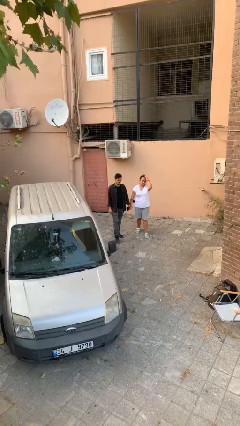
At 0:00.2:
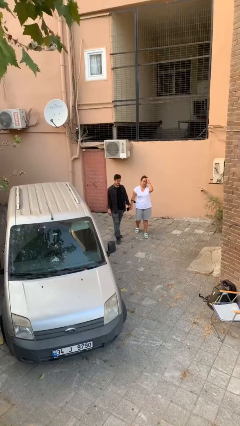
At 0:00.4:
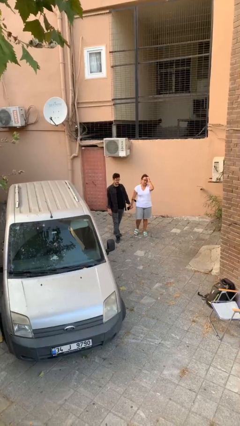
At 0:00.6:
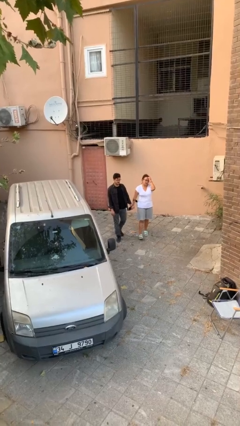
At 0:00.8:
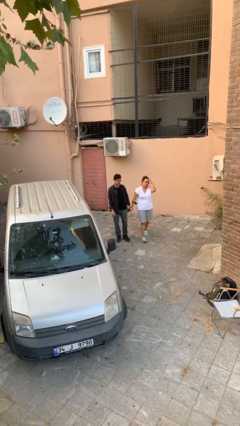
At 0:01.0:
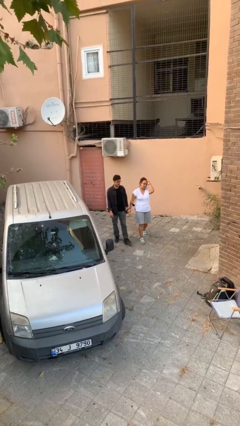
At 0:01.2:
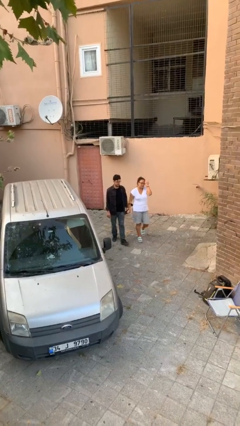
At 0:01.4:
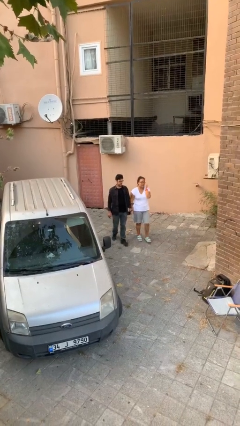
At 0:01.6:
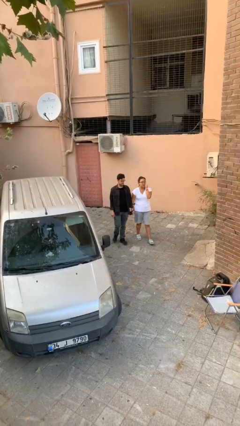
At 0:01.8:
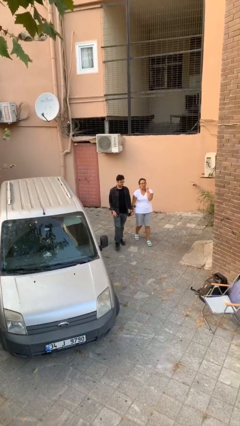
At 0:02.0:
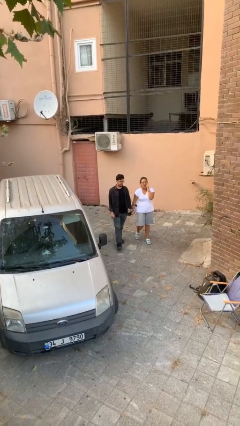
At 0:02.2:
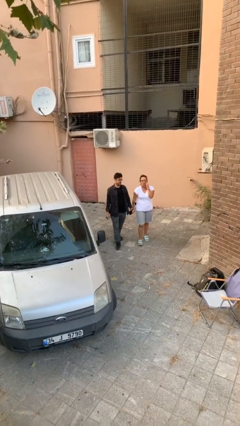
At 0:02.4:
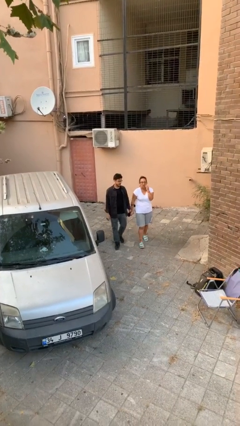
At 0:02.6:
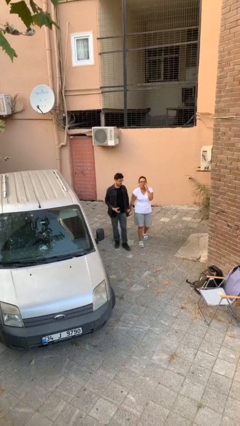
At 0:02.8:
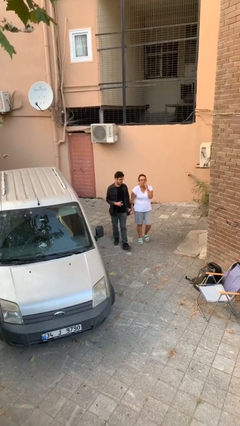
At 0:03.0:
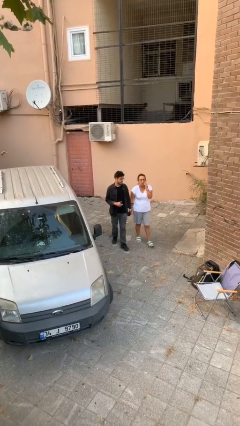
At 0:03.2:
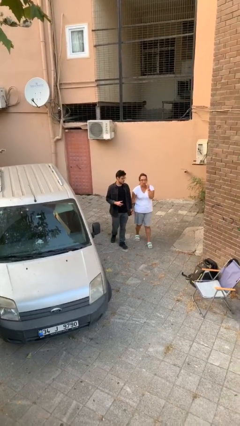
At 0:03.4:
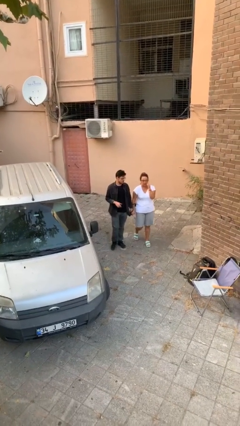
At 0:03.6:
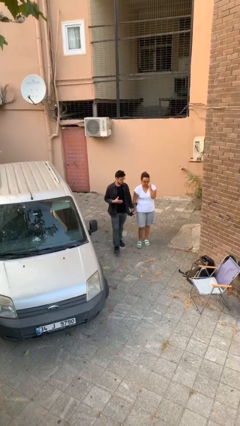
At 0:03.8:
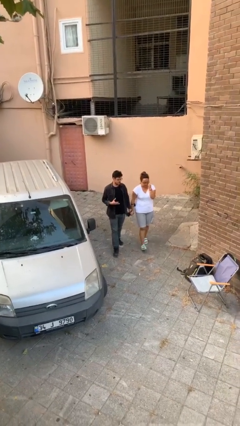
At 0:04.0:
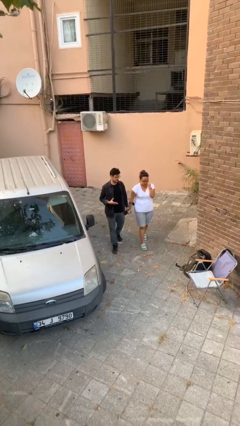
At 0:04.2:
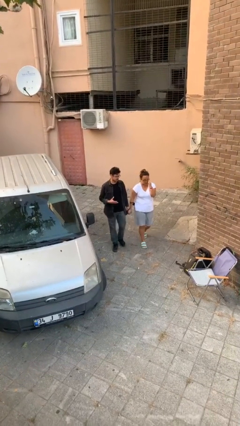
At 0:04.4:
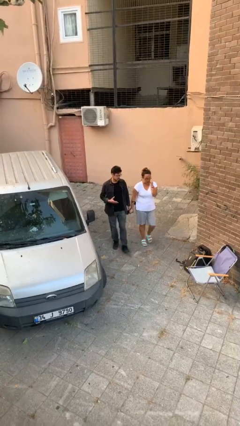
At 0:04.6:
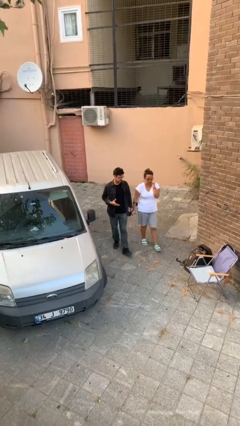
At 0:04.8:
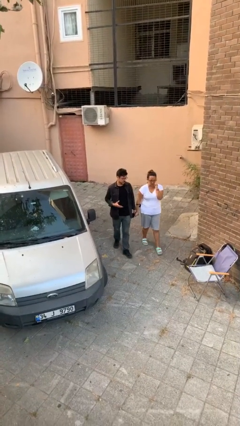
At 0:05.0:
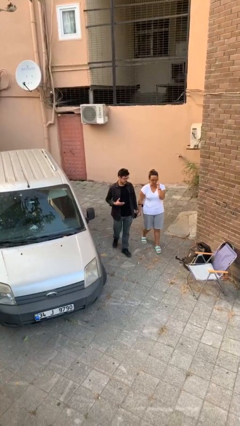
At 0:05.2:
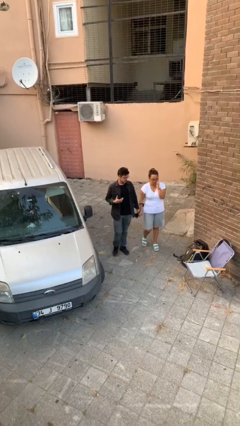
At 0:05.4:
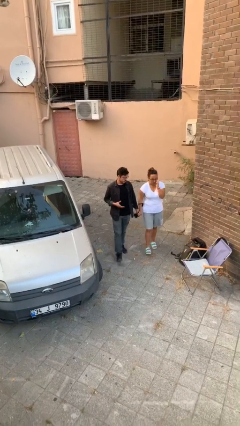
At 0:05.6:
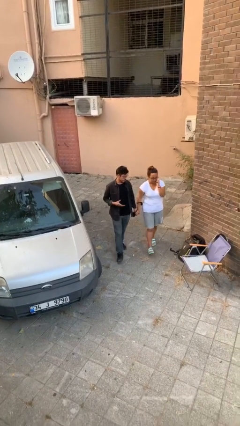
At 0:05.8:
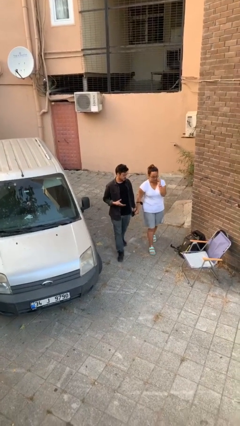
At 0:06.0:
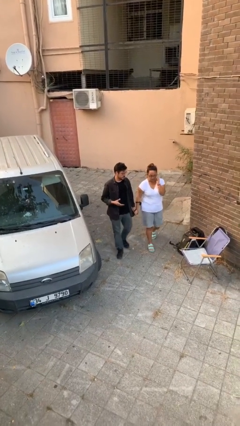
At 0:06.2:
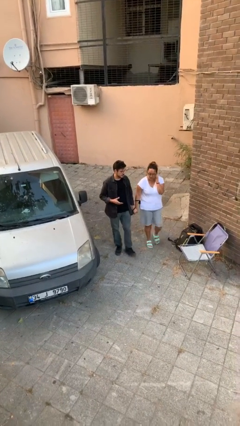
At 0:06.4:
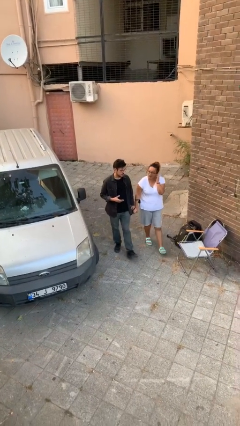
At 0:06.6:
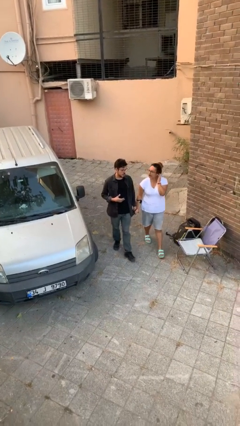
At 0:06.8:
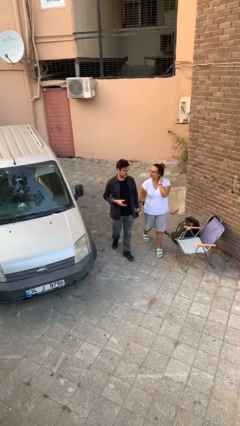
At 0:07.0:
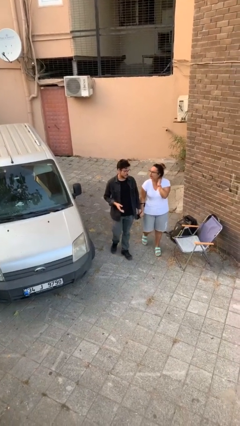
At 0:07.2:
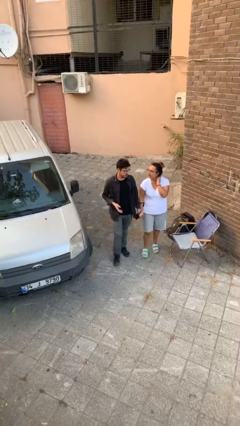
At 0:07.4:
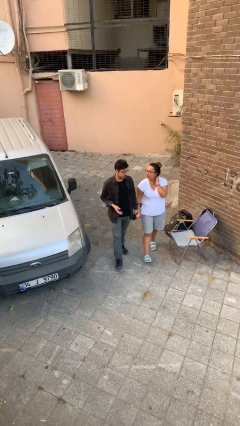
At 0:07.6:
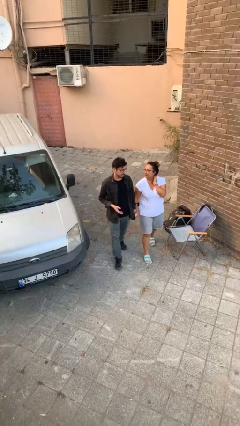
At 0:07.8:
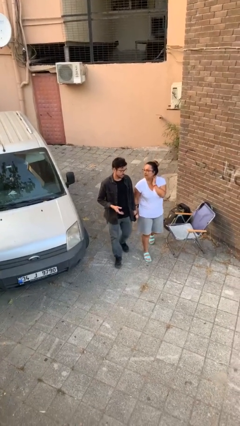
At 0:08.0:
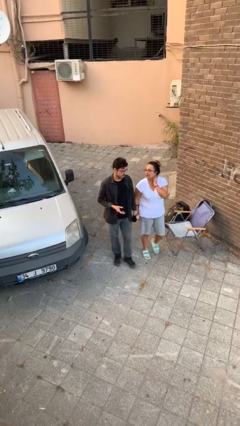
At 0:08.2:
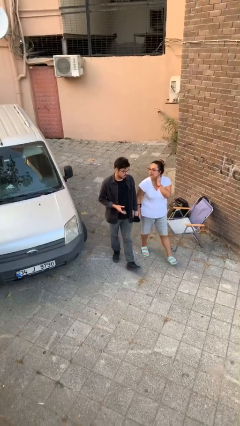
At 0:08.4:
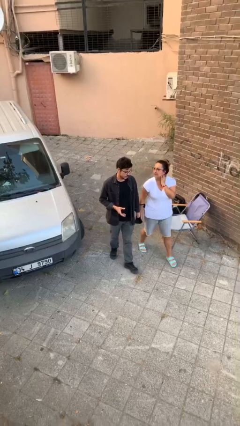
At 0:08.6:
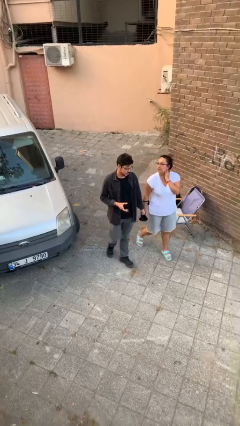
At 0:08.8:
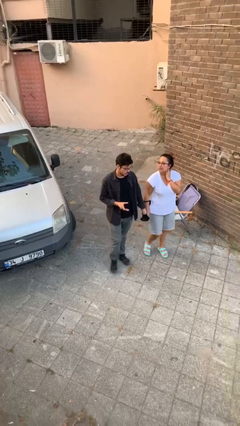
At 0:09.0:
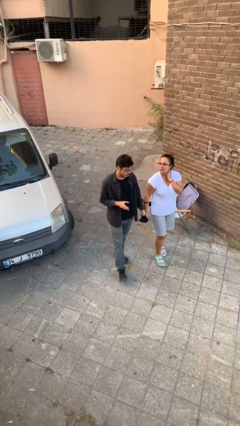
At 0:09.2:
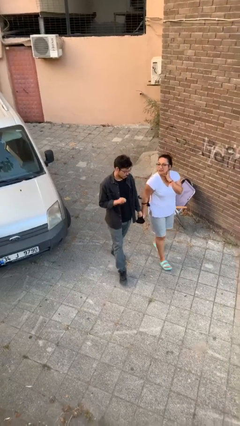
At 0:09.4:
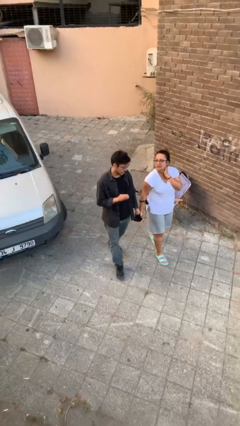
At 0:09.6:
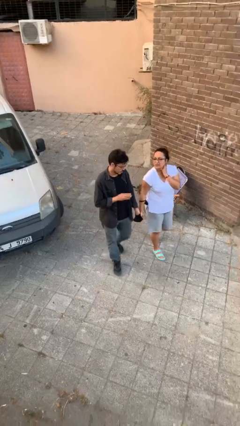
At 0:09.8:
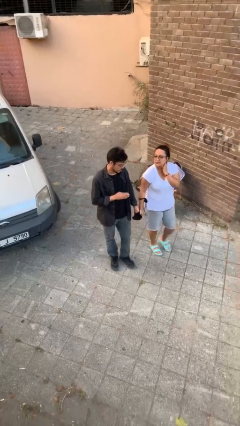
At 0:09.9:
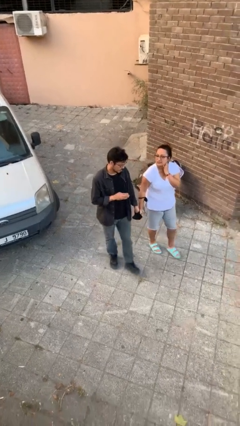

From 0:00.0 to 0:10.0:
person holds hand

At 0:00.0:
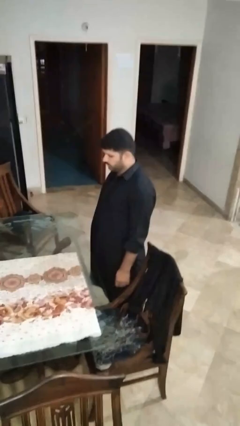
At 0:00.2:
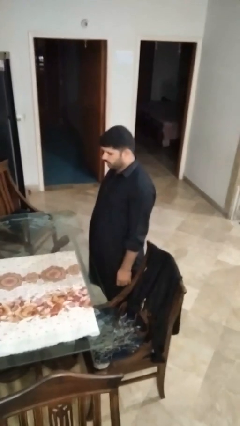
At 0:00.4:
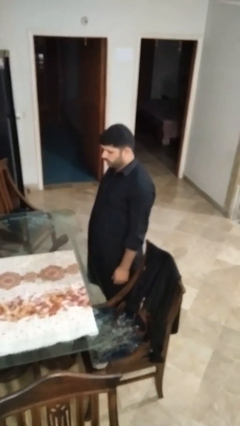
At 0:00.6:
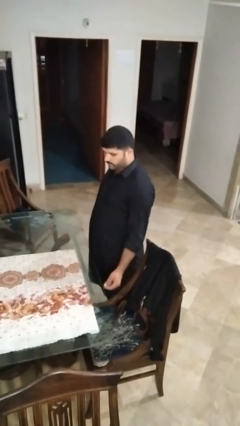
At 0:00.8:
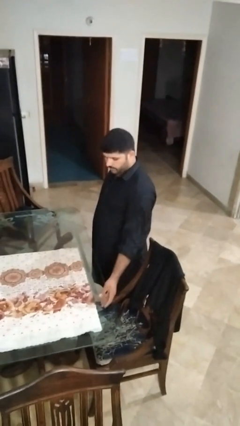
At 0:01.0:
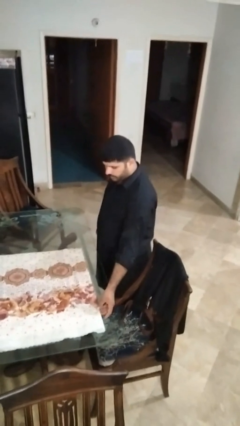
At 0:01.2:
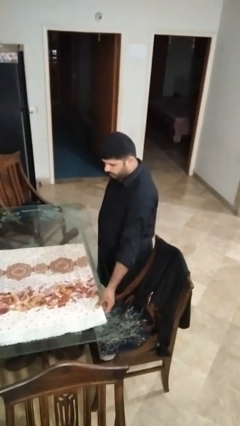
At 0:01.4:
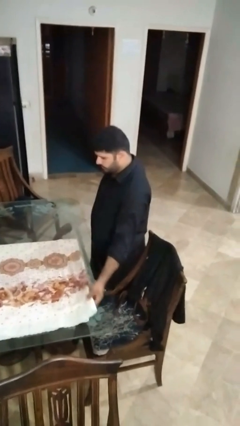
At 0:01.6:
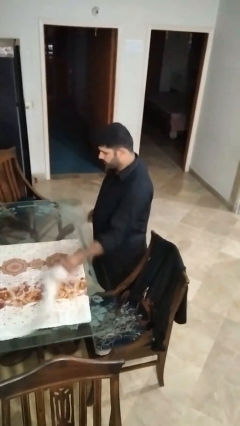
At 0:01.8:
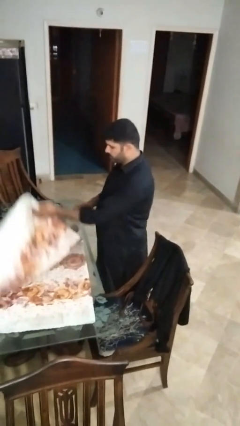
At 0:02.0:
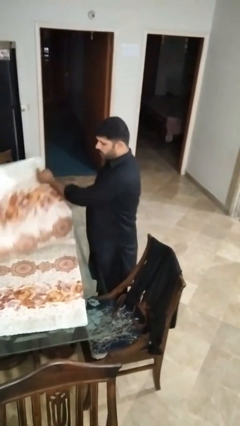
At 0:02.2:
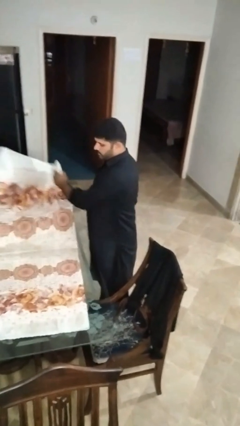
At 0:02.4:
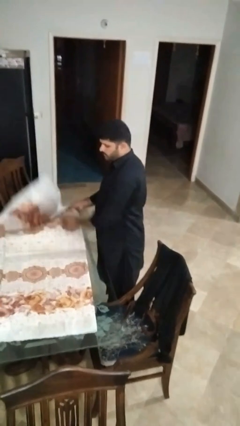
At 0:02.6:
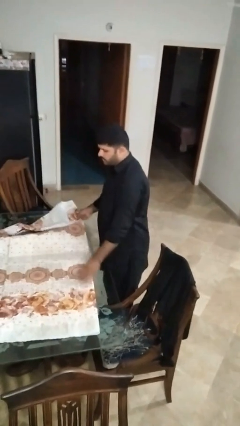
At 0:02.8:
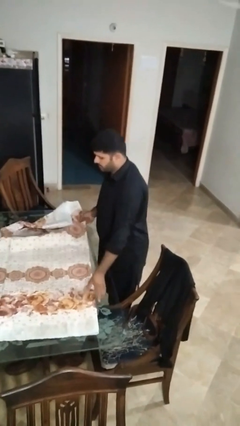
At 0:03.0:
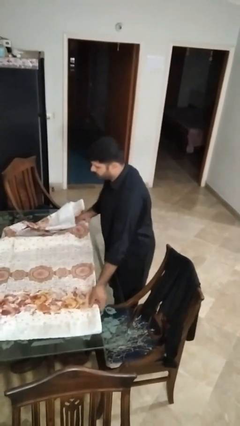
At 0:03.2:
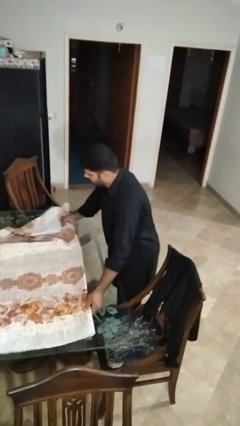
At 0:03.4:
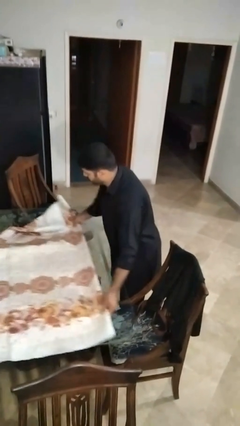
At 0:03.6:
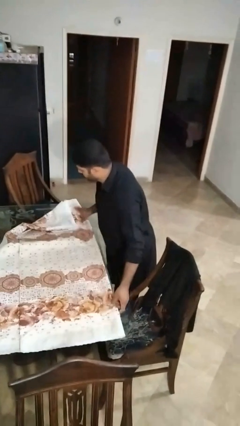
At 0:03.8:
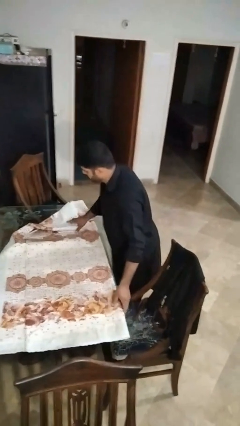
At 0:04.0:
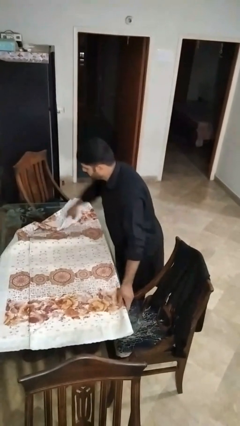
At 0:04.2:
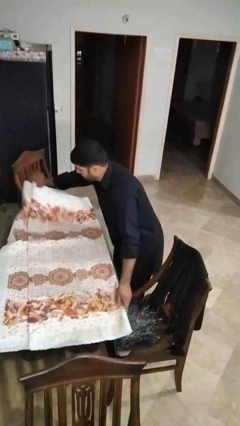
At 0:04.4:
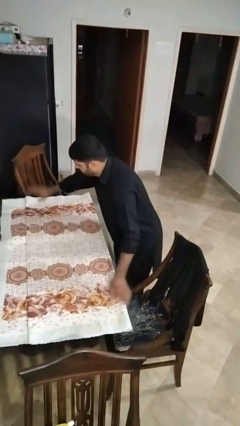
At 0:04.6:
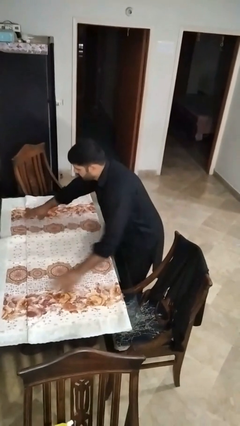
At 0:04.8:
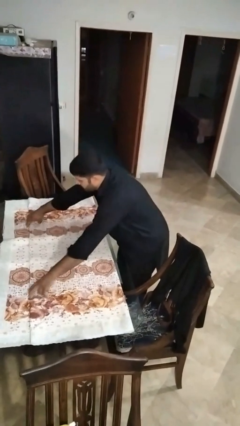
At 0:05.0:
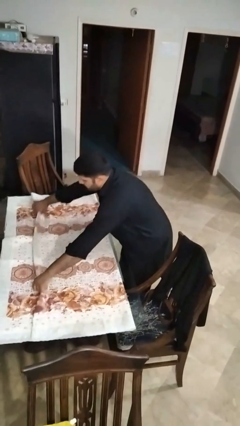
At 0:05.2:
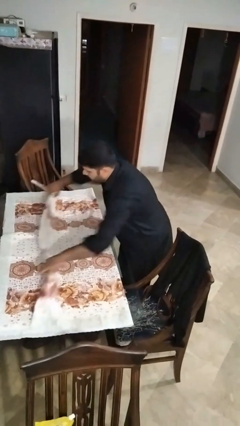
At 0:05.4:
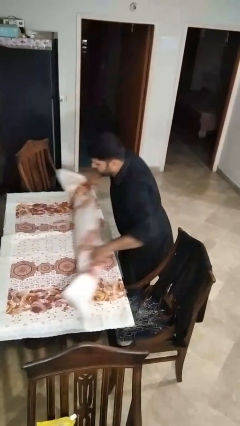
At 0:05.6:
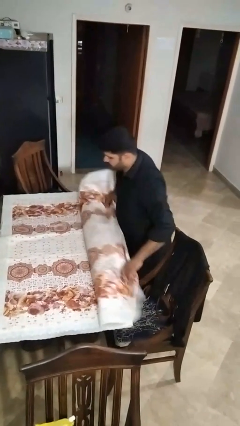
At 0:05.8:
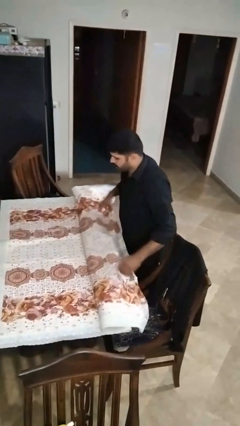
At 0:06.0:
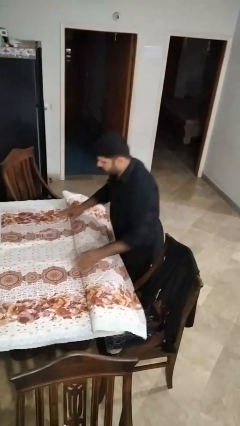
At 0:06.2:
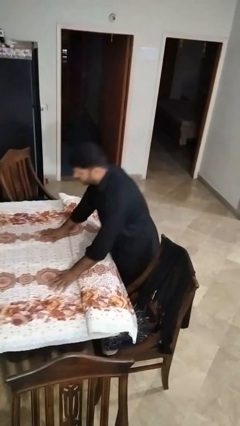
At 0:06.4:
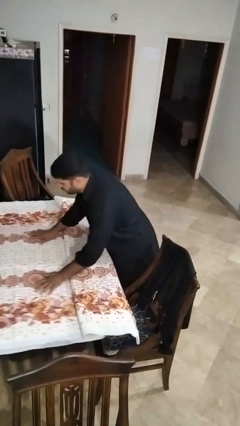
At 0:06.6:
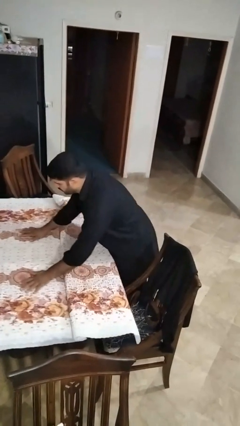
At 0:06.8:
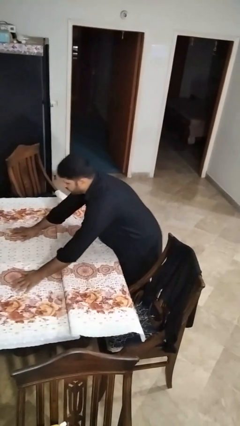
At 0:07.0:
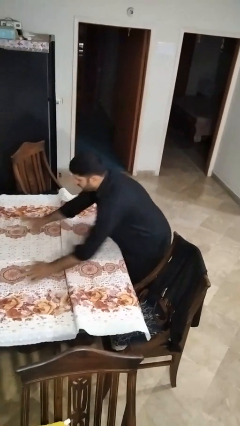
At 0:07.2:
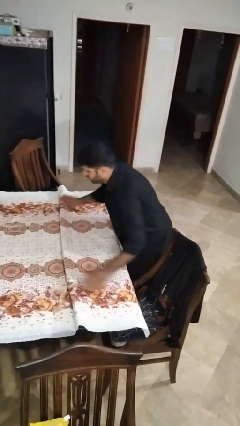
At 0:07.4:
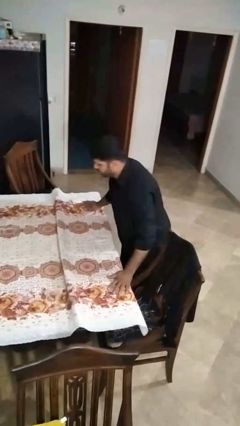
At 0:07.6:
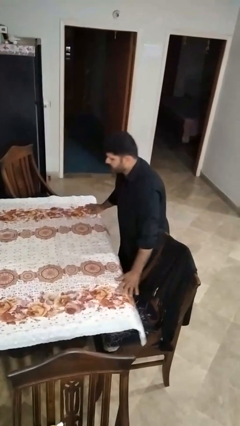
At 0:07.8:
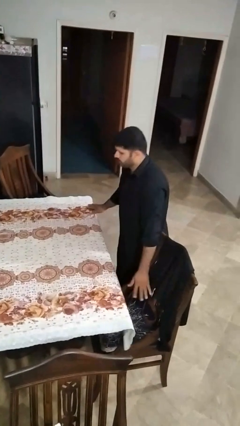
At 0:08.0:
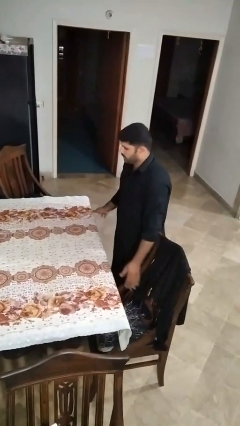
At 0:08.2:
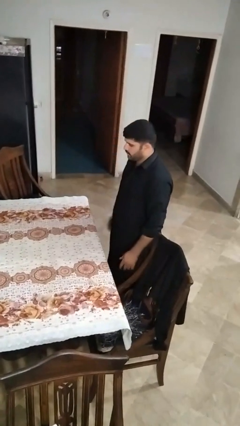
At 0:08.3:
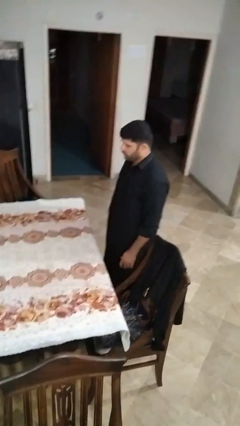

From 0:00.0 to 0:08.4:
person spreads tablecloth
